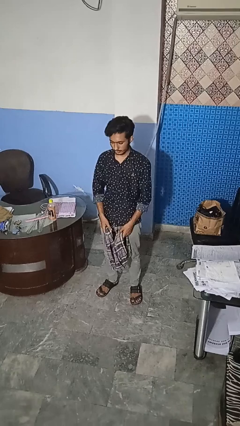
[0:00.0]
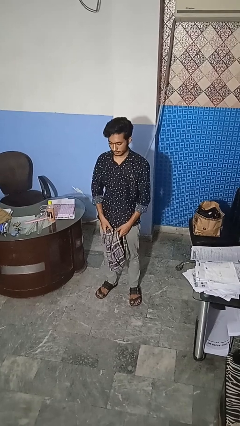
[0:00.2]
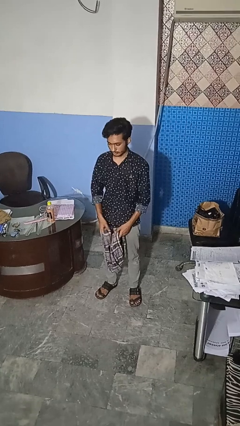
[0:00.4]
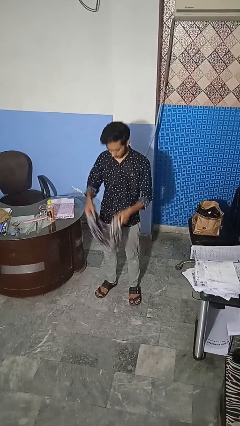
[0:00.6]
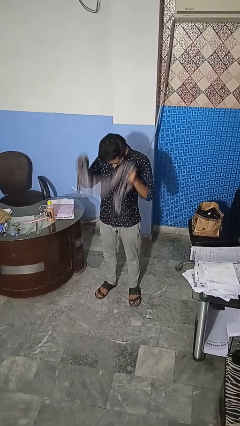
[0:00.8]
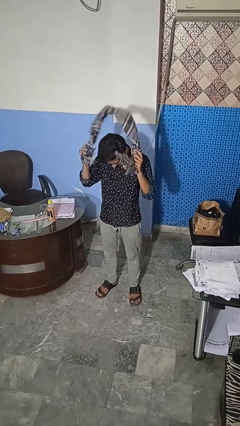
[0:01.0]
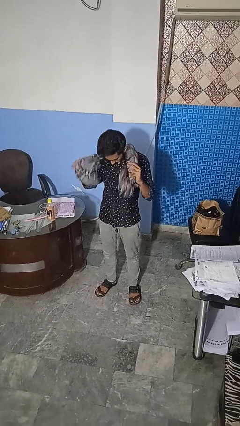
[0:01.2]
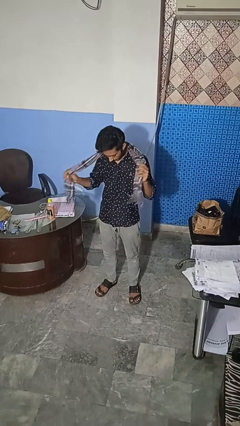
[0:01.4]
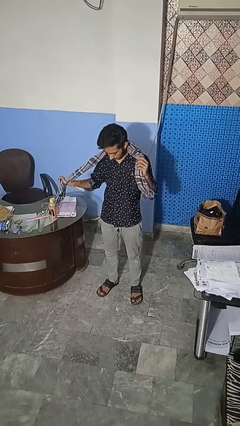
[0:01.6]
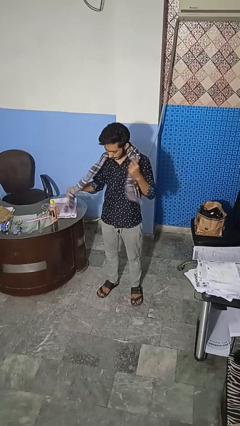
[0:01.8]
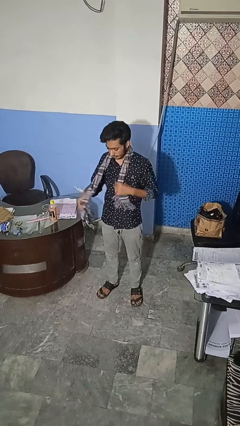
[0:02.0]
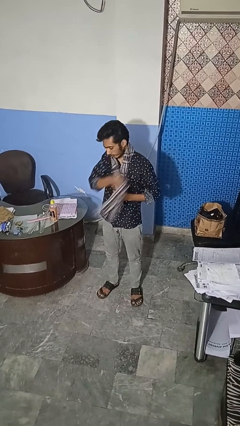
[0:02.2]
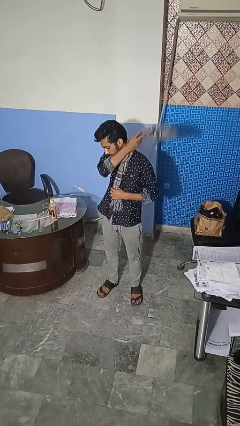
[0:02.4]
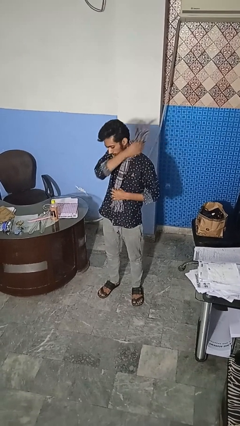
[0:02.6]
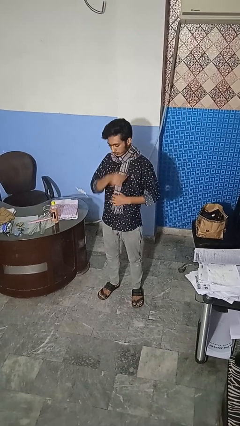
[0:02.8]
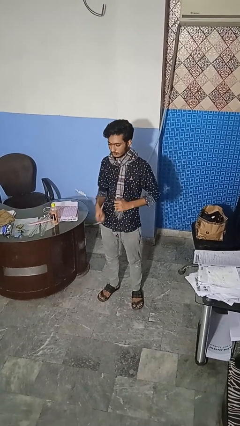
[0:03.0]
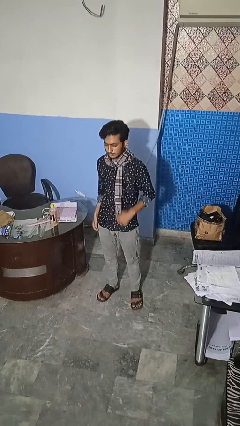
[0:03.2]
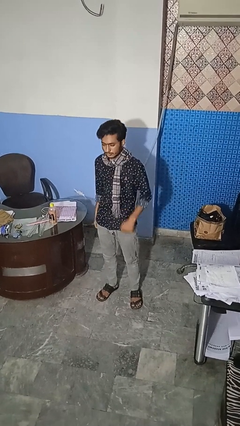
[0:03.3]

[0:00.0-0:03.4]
person puts on scarf

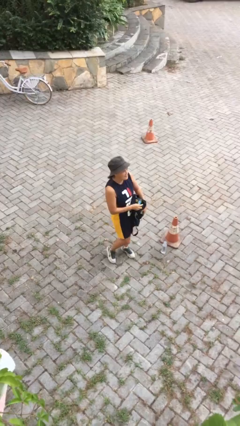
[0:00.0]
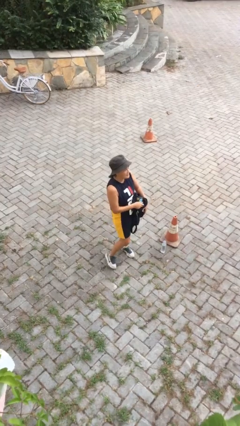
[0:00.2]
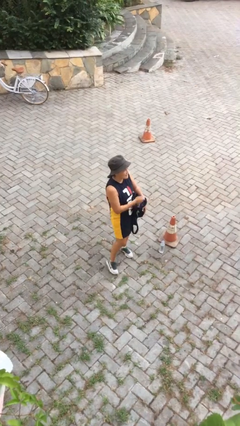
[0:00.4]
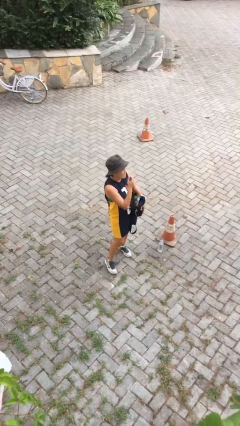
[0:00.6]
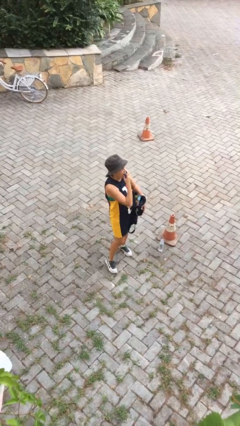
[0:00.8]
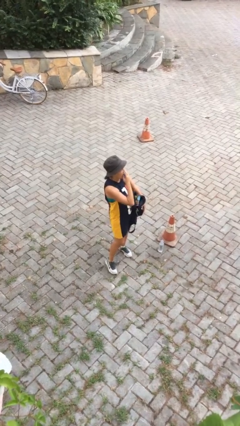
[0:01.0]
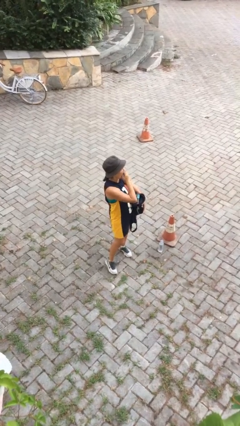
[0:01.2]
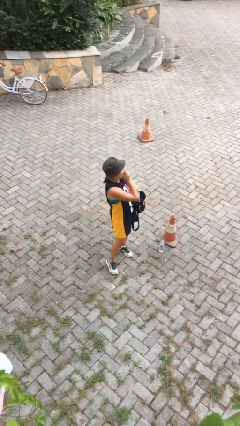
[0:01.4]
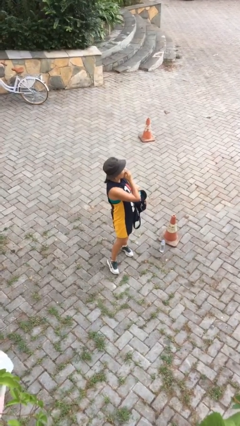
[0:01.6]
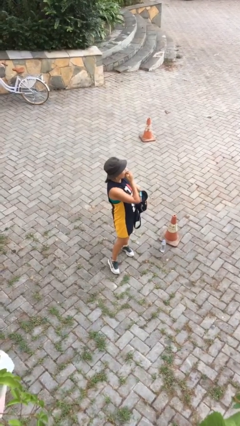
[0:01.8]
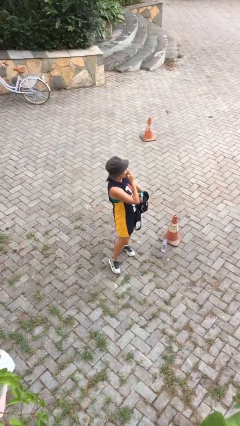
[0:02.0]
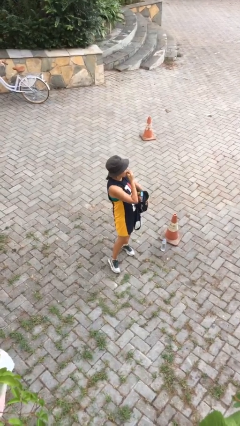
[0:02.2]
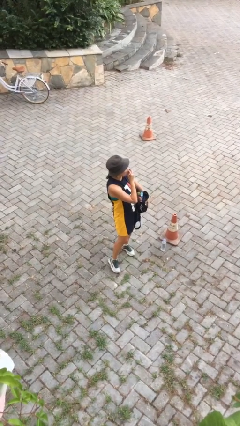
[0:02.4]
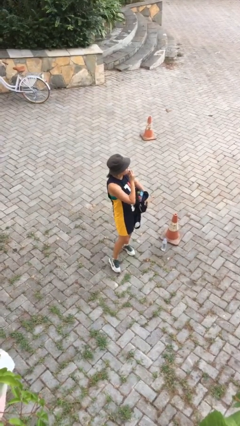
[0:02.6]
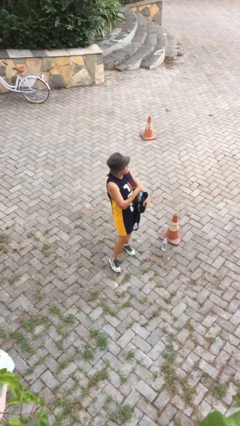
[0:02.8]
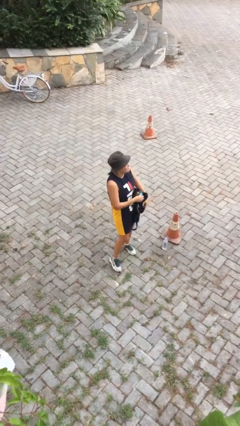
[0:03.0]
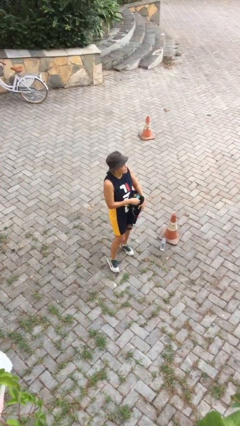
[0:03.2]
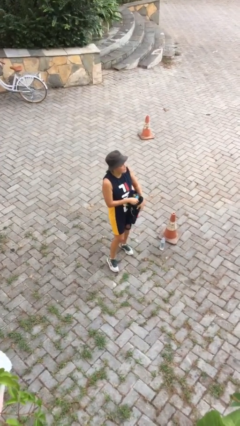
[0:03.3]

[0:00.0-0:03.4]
person eats snack from bag

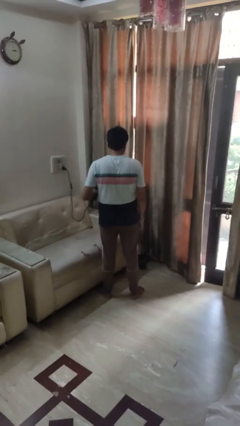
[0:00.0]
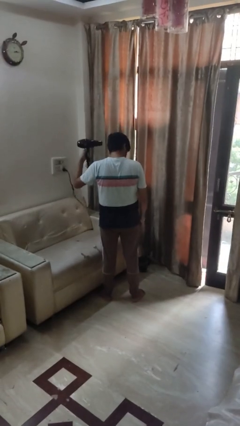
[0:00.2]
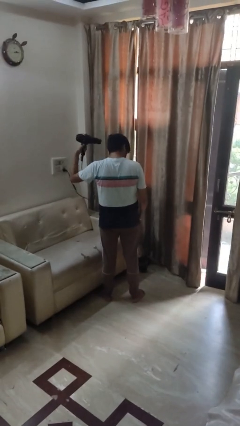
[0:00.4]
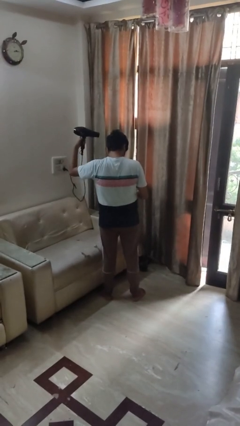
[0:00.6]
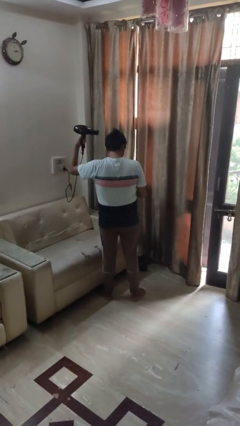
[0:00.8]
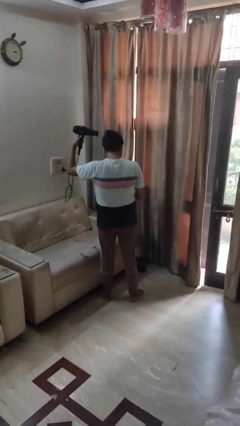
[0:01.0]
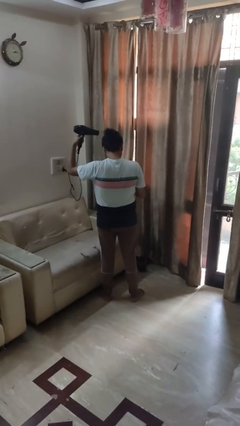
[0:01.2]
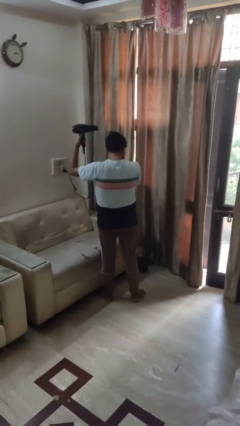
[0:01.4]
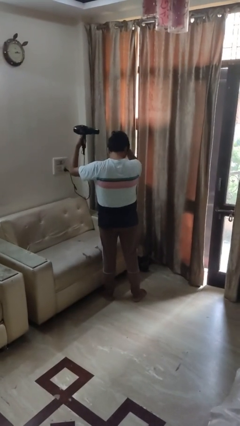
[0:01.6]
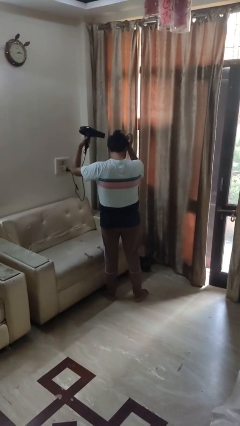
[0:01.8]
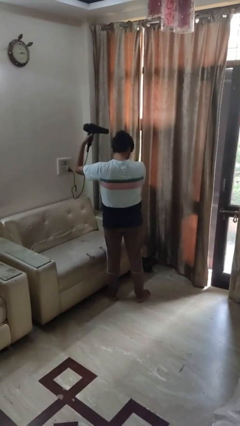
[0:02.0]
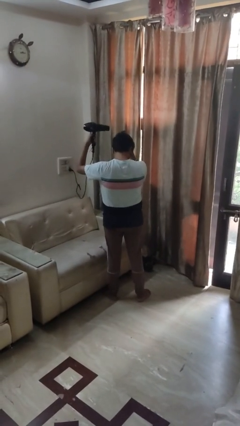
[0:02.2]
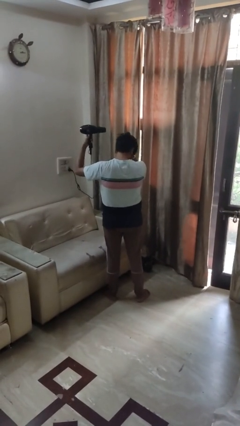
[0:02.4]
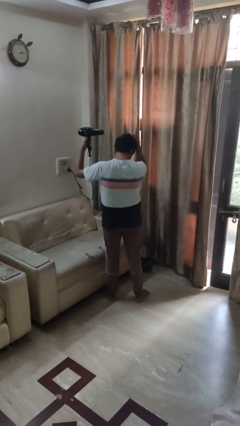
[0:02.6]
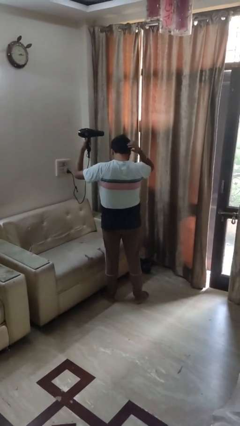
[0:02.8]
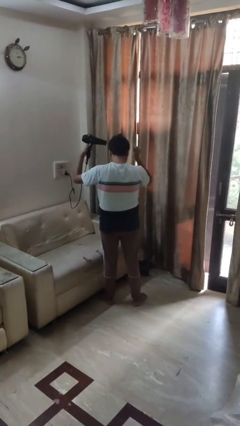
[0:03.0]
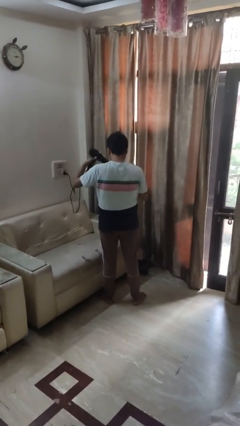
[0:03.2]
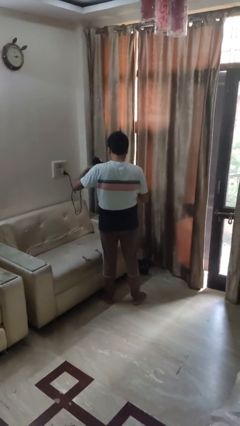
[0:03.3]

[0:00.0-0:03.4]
person dries hair with hairdryer

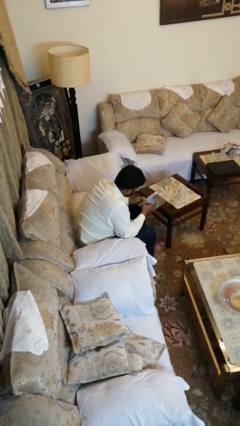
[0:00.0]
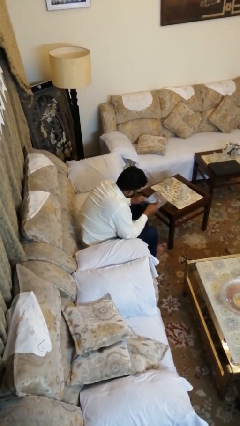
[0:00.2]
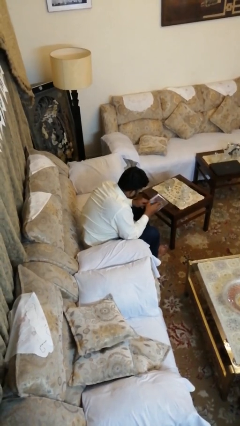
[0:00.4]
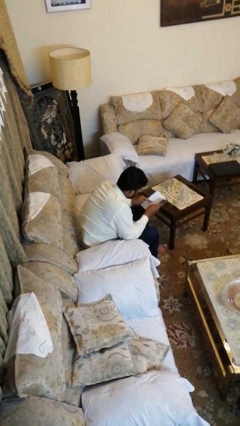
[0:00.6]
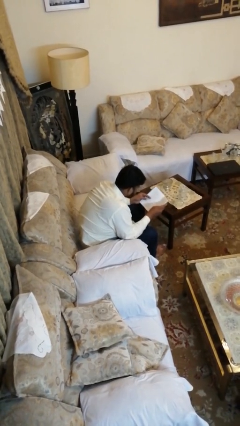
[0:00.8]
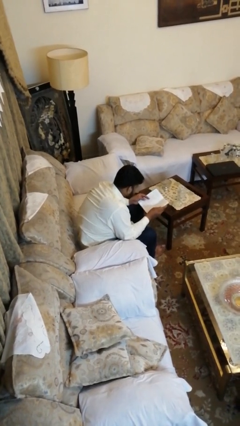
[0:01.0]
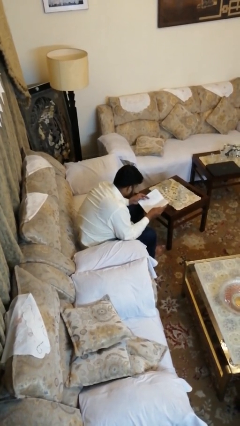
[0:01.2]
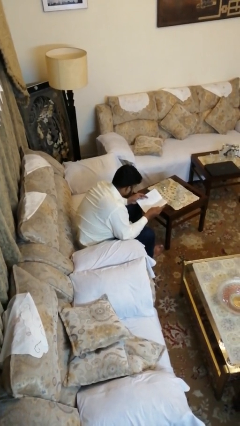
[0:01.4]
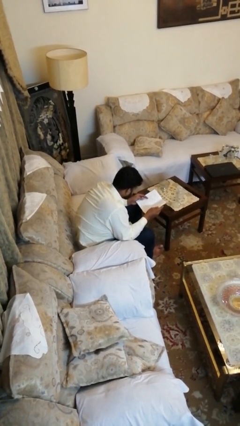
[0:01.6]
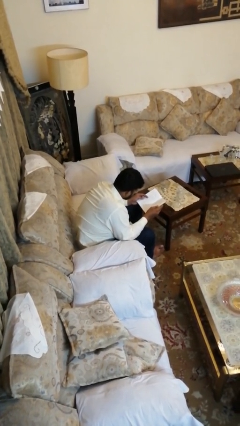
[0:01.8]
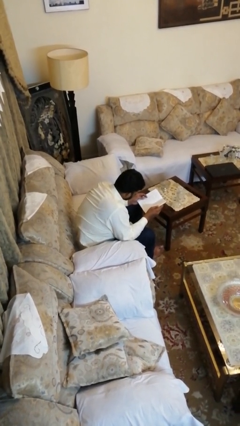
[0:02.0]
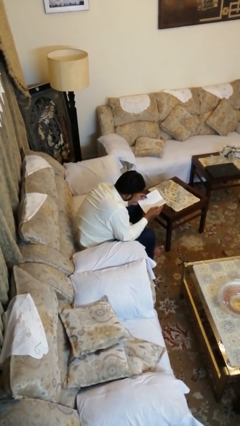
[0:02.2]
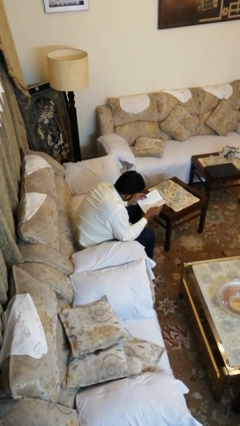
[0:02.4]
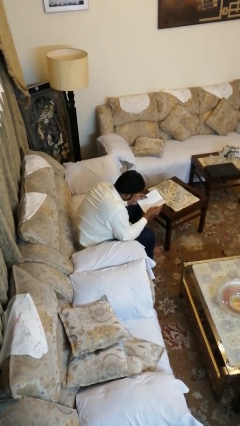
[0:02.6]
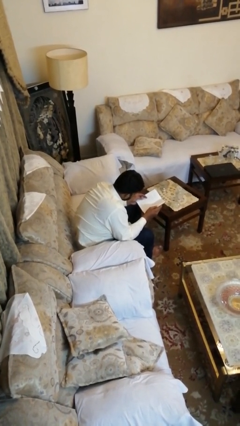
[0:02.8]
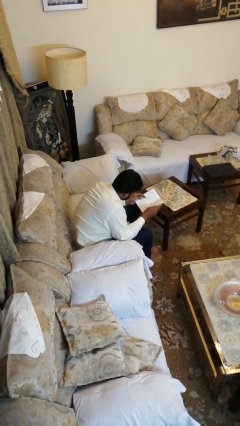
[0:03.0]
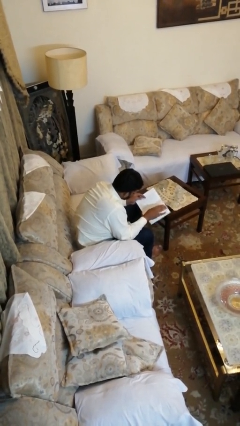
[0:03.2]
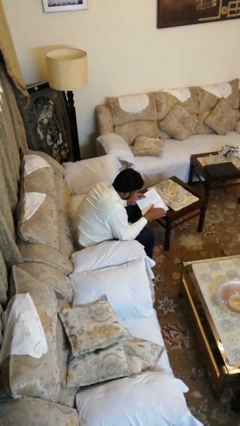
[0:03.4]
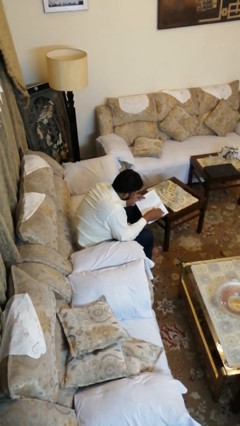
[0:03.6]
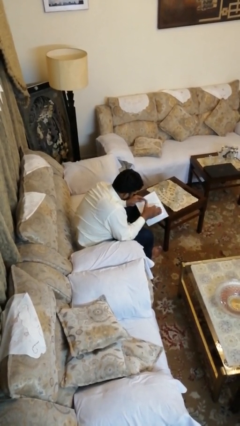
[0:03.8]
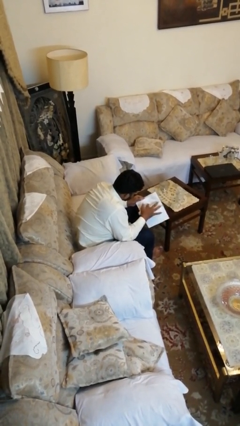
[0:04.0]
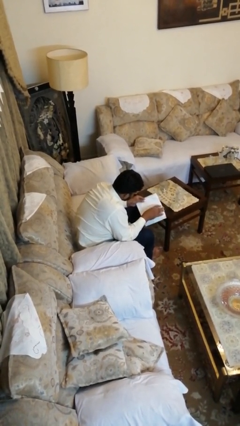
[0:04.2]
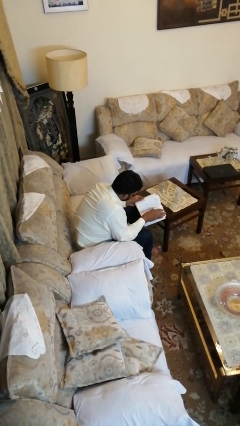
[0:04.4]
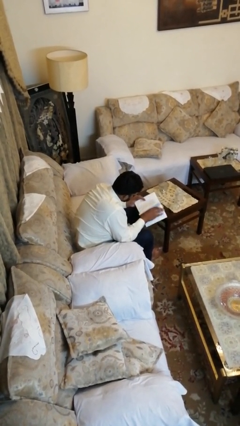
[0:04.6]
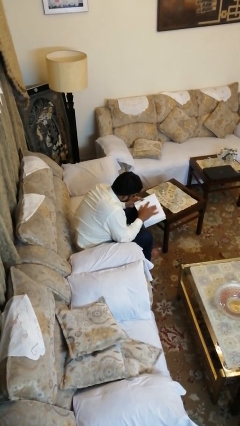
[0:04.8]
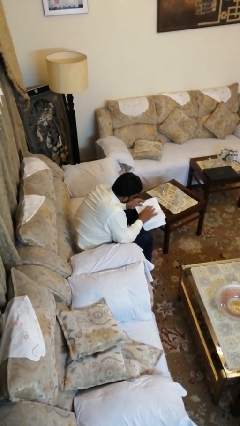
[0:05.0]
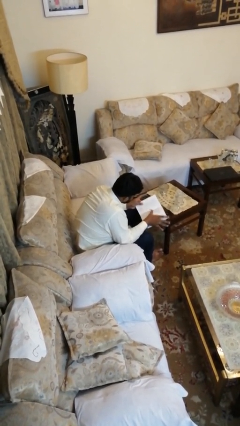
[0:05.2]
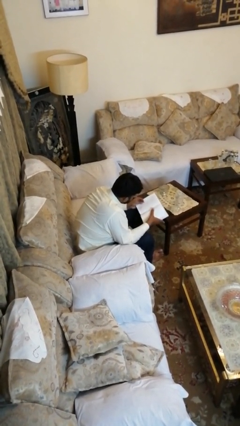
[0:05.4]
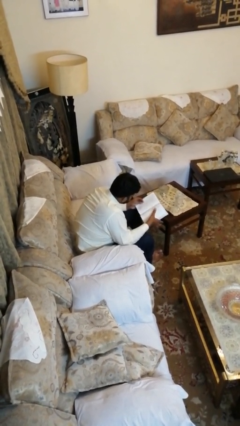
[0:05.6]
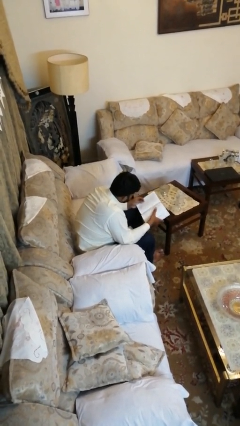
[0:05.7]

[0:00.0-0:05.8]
person reads book

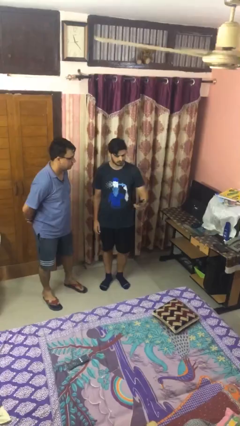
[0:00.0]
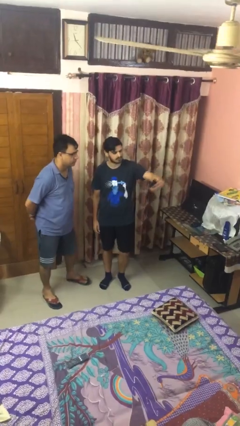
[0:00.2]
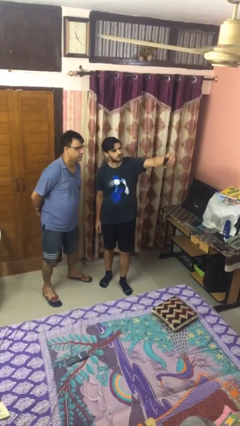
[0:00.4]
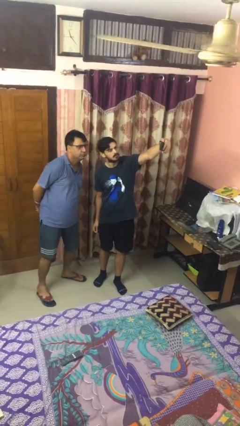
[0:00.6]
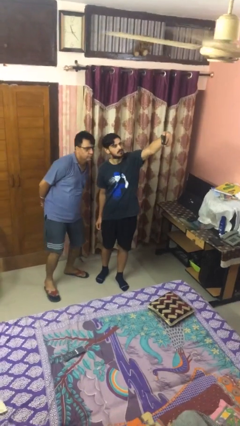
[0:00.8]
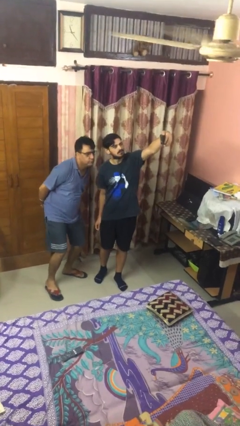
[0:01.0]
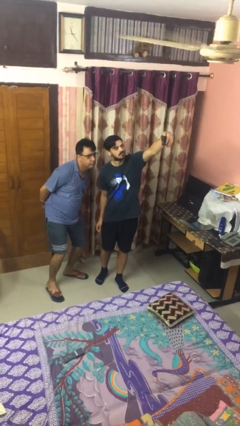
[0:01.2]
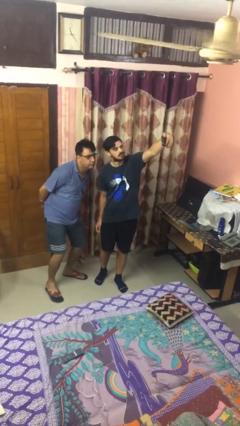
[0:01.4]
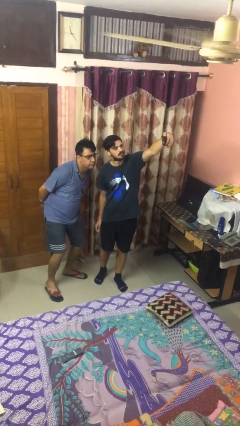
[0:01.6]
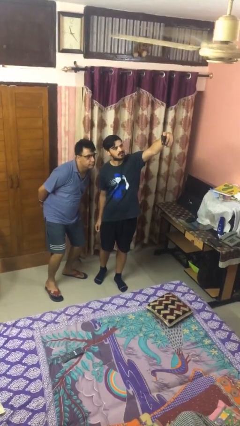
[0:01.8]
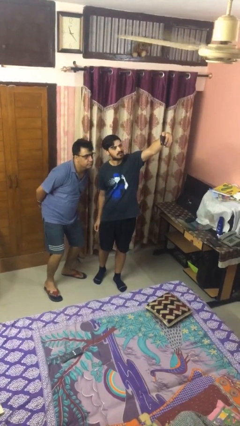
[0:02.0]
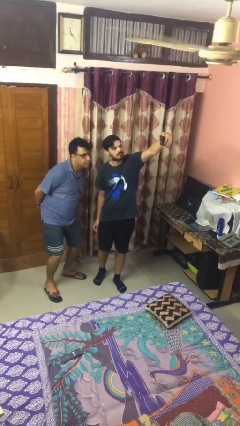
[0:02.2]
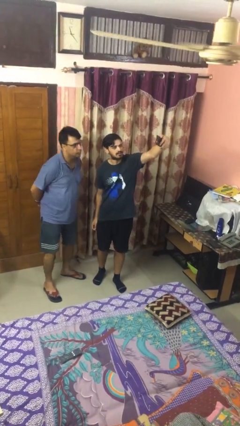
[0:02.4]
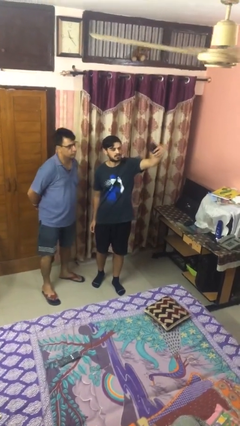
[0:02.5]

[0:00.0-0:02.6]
person takes selfie with person
